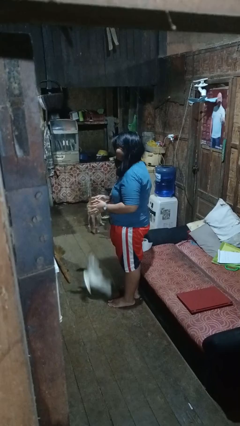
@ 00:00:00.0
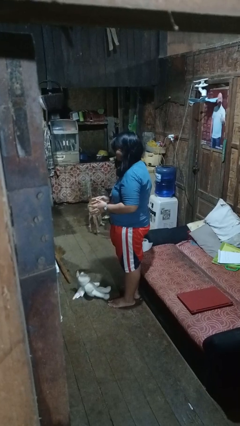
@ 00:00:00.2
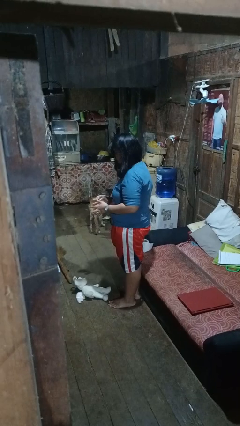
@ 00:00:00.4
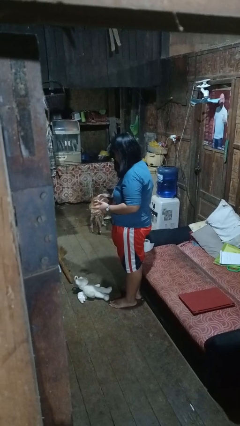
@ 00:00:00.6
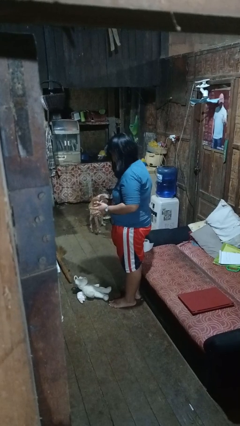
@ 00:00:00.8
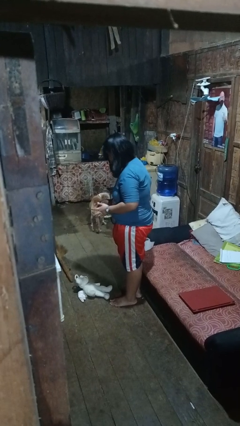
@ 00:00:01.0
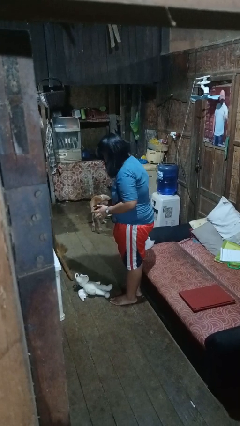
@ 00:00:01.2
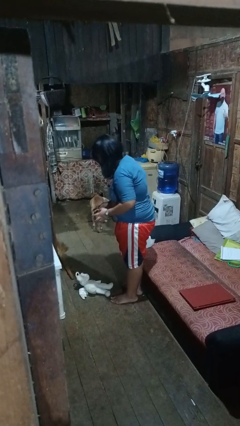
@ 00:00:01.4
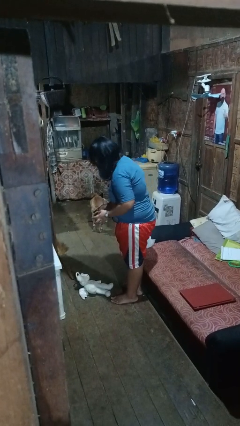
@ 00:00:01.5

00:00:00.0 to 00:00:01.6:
person drops object

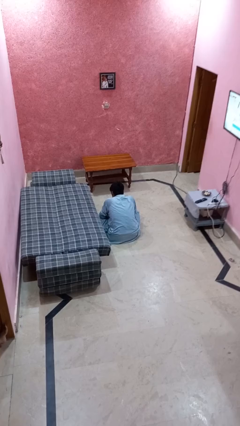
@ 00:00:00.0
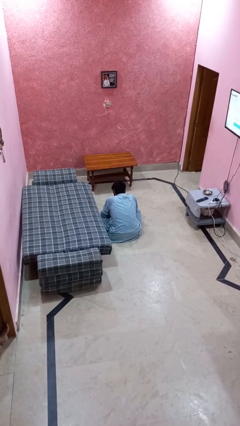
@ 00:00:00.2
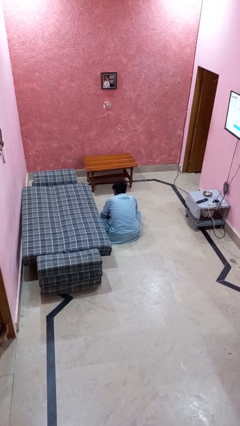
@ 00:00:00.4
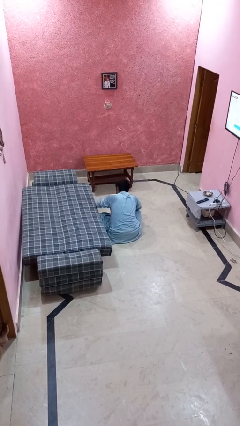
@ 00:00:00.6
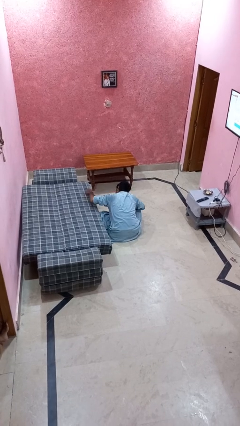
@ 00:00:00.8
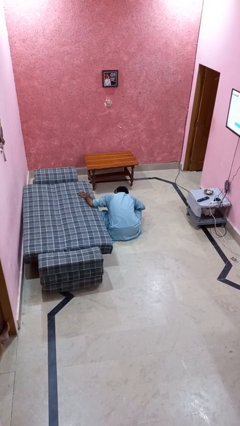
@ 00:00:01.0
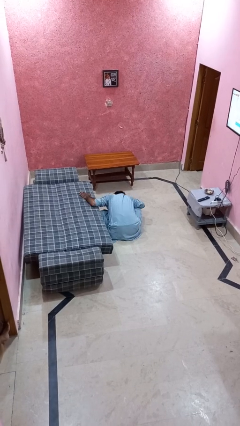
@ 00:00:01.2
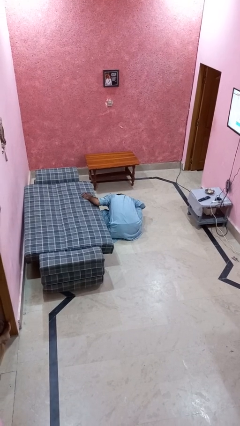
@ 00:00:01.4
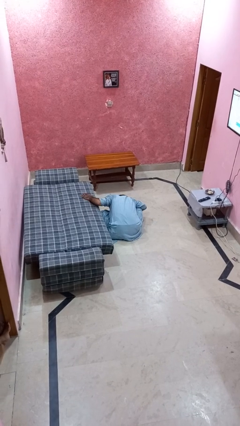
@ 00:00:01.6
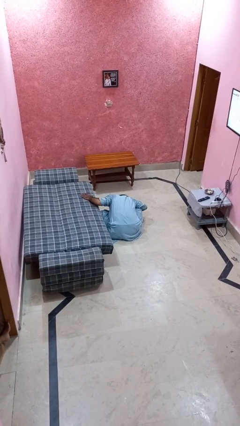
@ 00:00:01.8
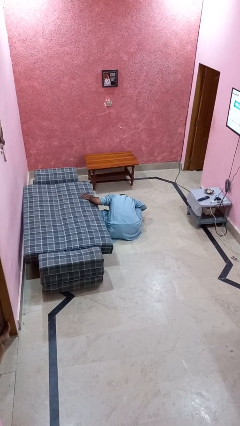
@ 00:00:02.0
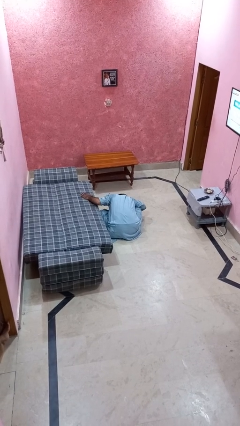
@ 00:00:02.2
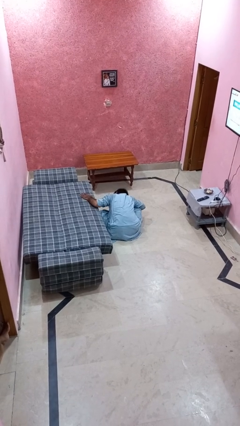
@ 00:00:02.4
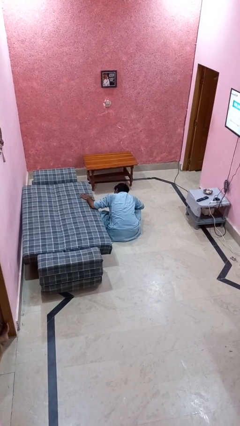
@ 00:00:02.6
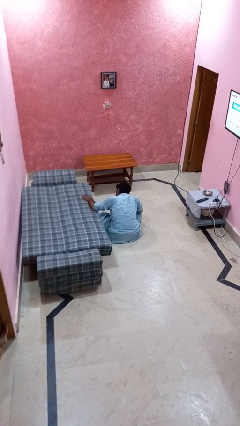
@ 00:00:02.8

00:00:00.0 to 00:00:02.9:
person searches under bed

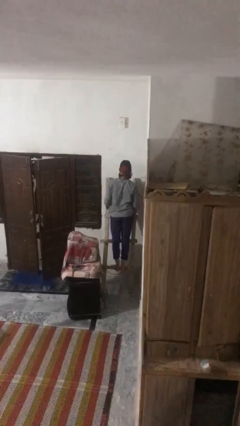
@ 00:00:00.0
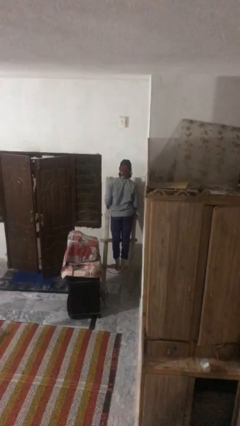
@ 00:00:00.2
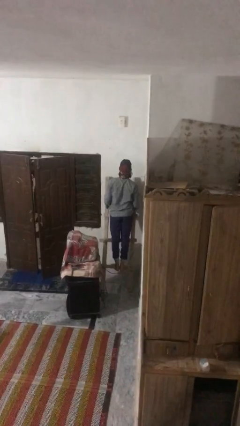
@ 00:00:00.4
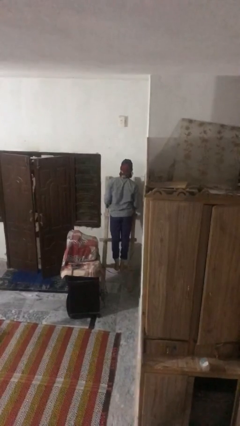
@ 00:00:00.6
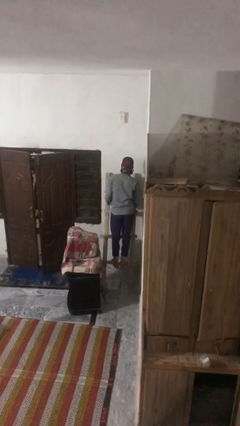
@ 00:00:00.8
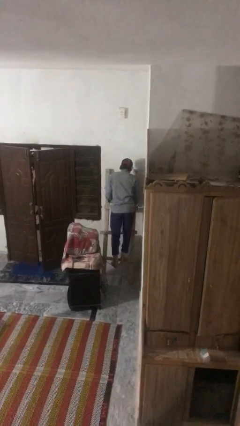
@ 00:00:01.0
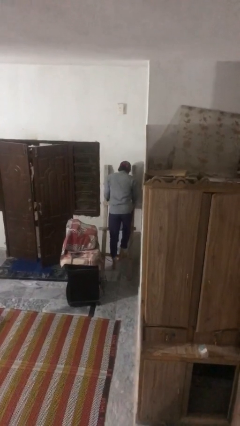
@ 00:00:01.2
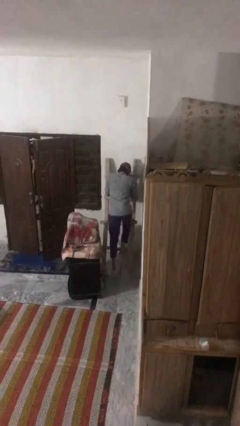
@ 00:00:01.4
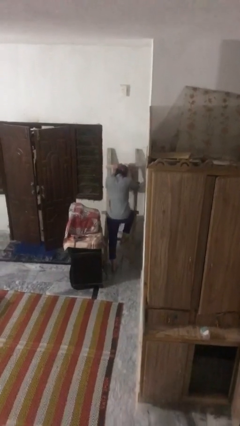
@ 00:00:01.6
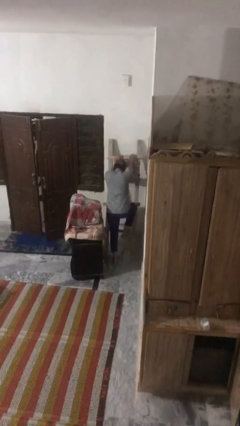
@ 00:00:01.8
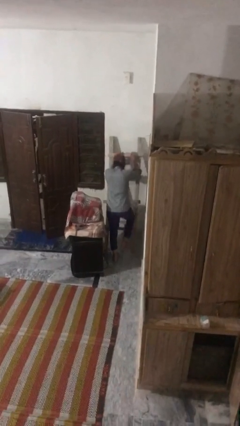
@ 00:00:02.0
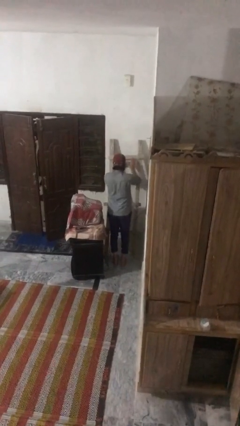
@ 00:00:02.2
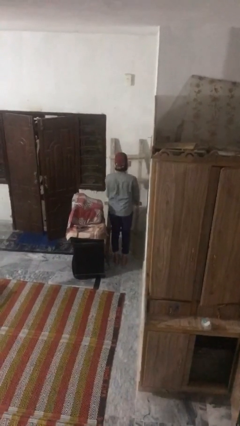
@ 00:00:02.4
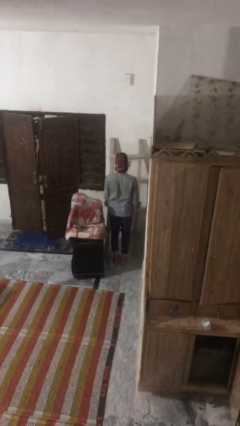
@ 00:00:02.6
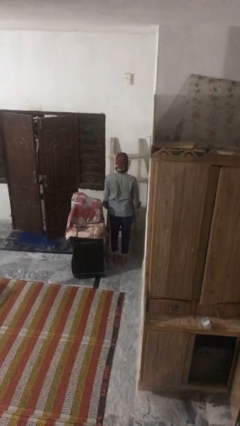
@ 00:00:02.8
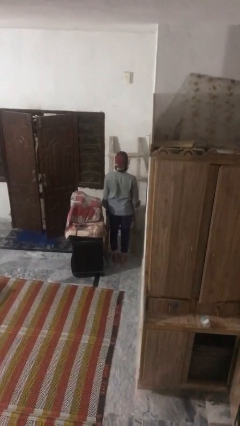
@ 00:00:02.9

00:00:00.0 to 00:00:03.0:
person climbs down ladder

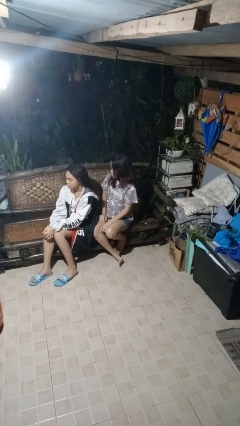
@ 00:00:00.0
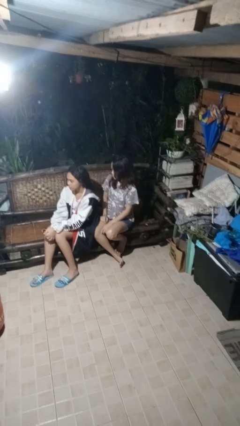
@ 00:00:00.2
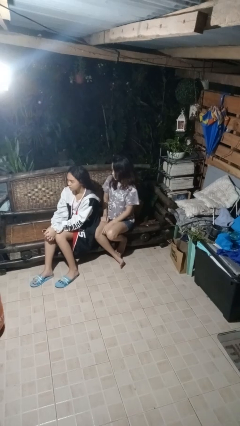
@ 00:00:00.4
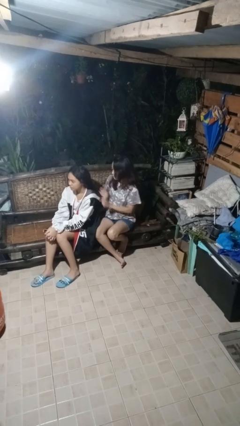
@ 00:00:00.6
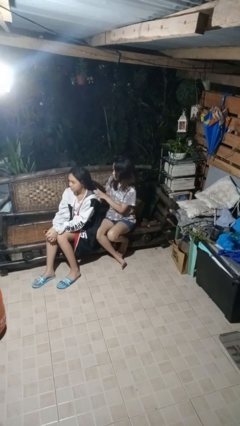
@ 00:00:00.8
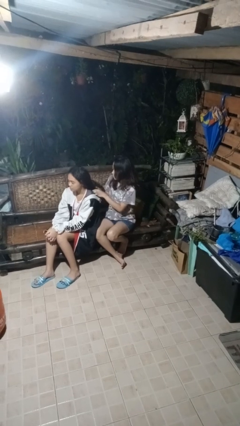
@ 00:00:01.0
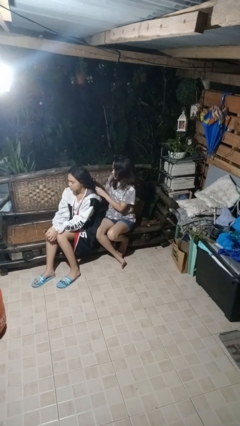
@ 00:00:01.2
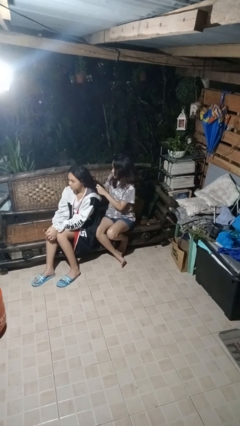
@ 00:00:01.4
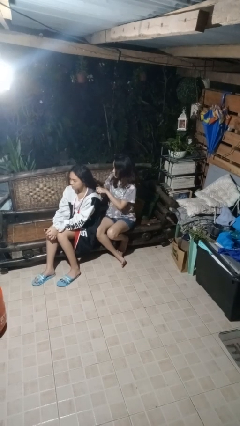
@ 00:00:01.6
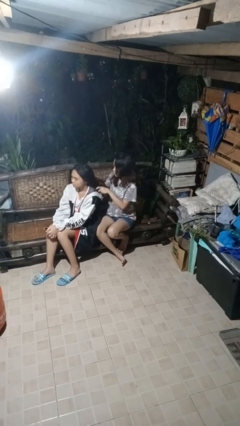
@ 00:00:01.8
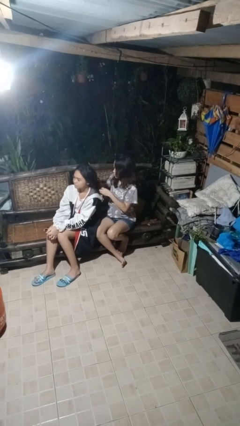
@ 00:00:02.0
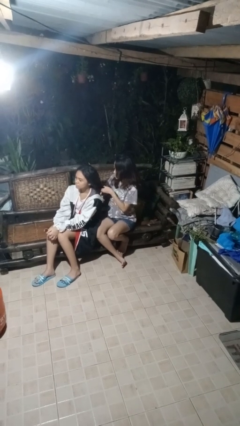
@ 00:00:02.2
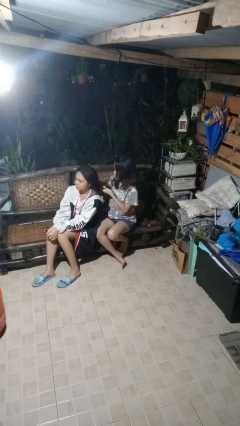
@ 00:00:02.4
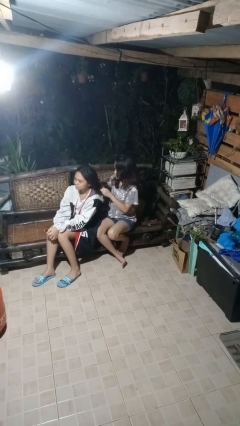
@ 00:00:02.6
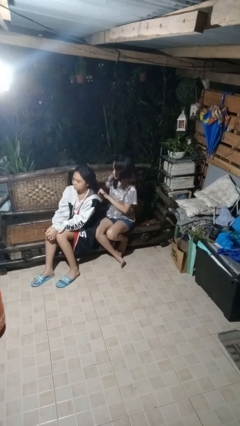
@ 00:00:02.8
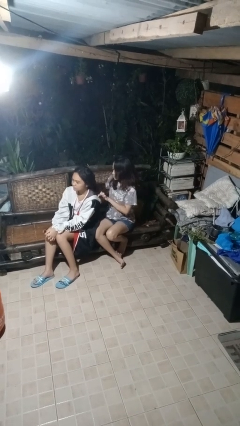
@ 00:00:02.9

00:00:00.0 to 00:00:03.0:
person braids hair of person

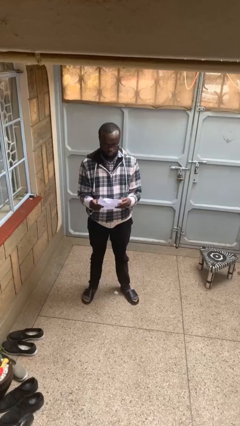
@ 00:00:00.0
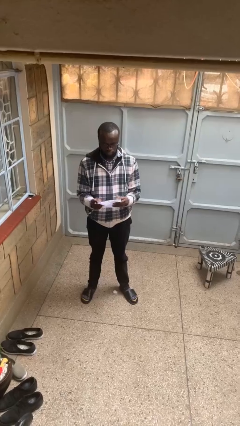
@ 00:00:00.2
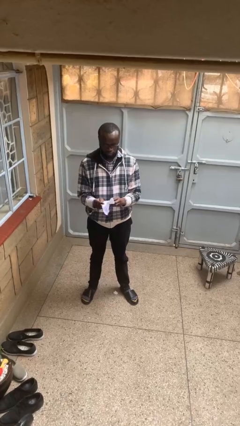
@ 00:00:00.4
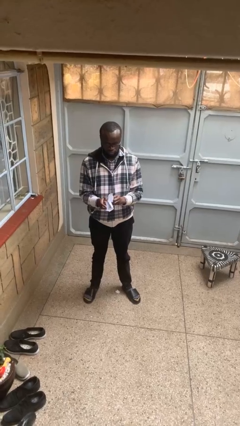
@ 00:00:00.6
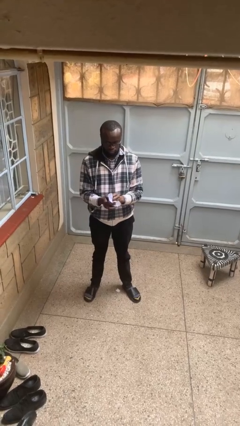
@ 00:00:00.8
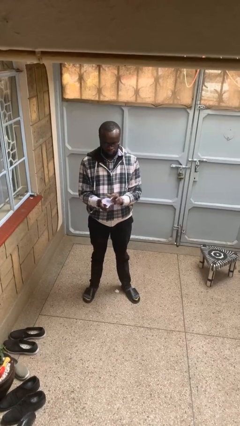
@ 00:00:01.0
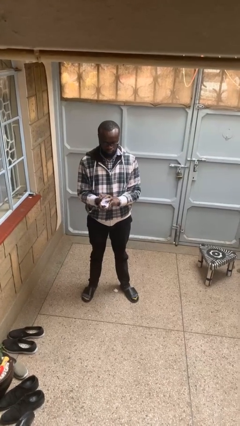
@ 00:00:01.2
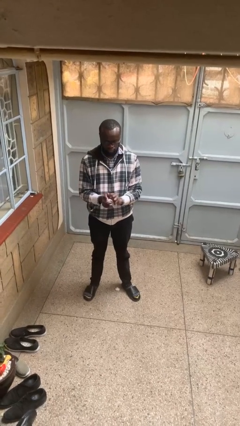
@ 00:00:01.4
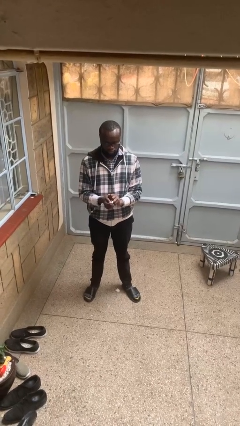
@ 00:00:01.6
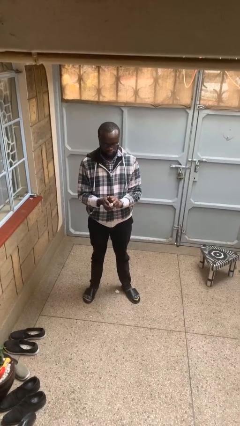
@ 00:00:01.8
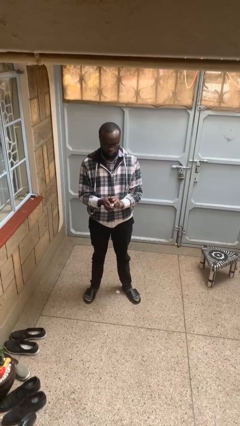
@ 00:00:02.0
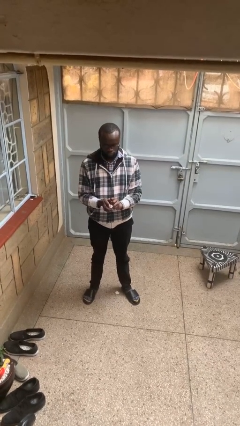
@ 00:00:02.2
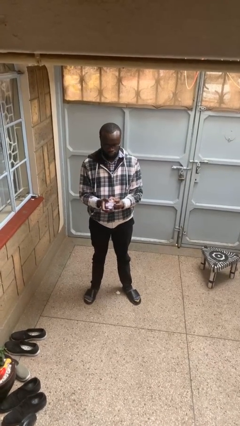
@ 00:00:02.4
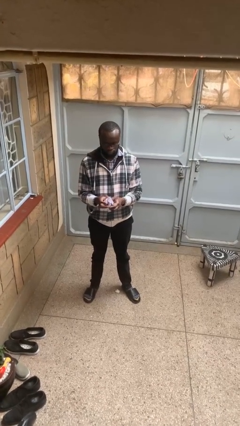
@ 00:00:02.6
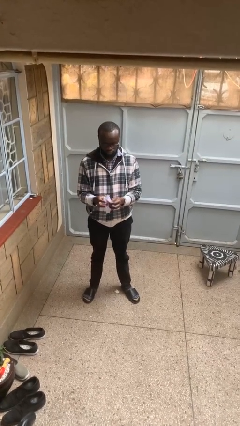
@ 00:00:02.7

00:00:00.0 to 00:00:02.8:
person crumples paper

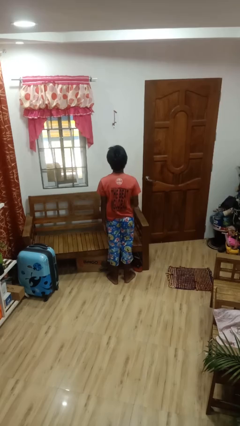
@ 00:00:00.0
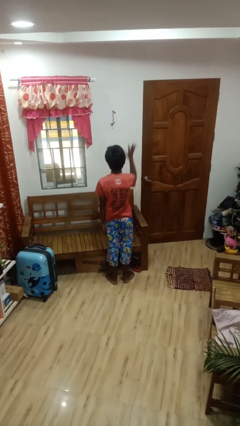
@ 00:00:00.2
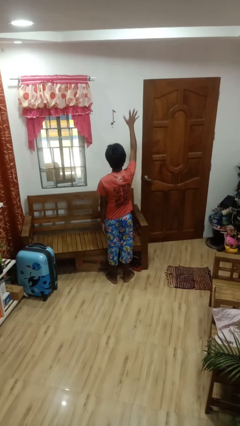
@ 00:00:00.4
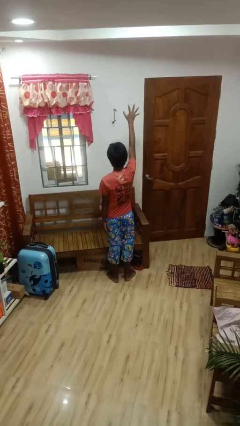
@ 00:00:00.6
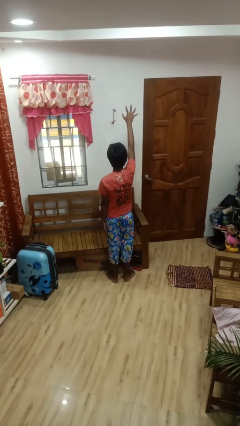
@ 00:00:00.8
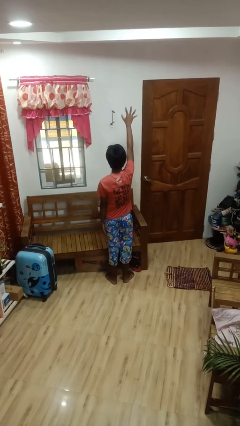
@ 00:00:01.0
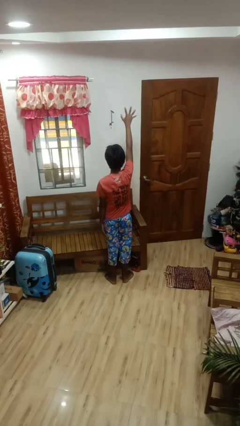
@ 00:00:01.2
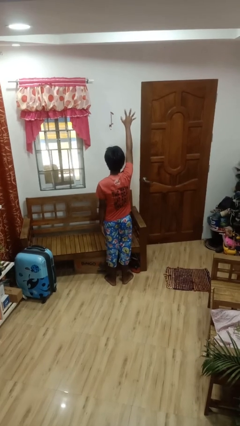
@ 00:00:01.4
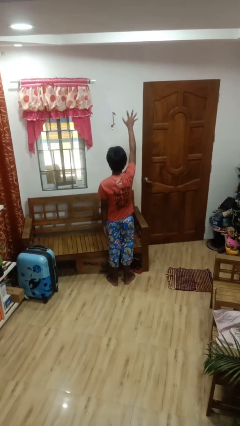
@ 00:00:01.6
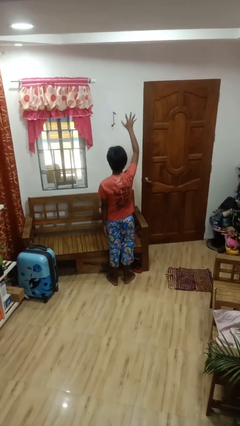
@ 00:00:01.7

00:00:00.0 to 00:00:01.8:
person gestures number five

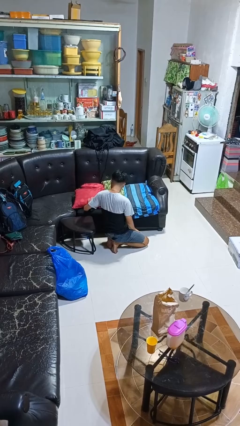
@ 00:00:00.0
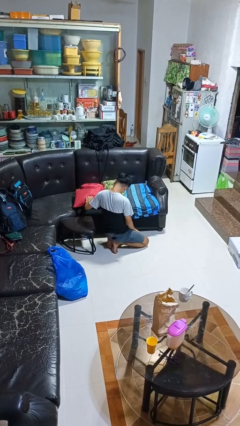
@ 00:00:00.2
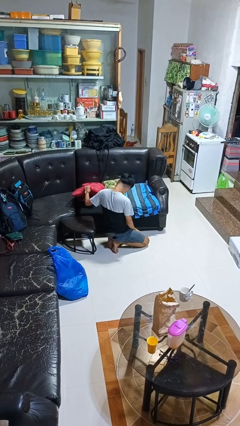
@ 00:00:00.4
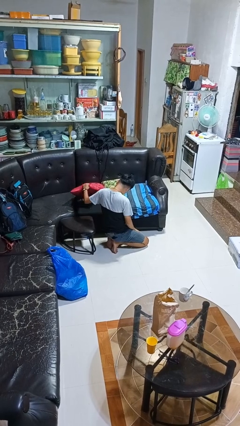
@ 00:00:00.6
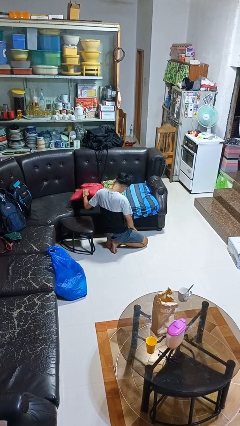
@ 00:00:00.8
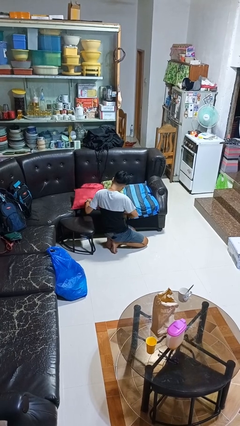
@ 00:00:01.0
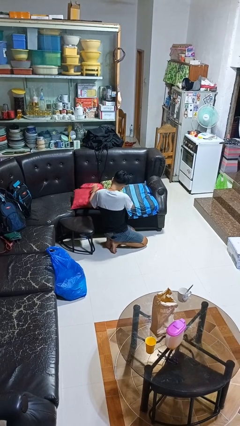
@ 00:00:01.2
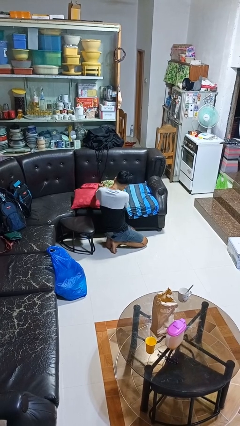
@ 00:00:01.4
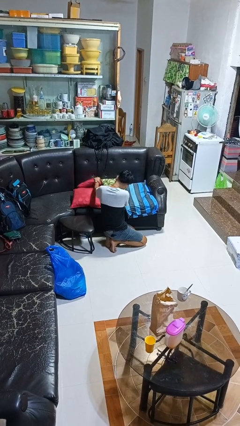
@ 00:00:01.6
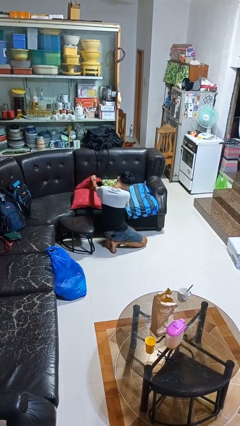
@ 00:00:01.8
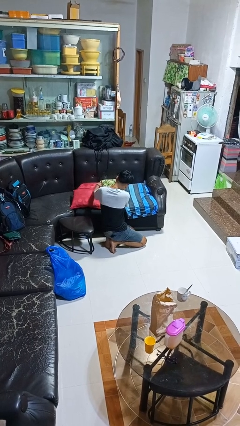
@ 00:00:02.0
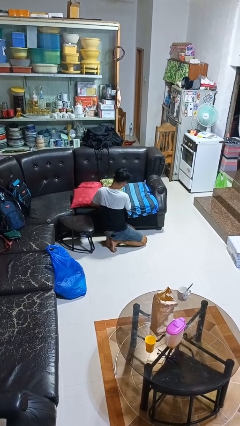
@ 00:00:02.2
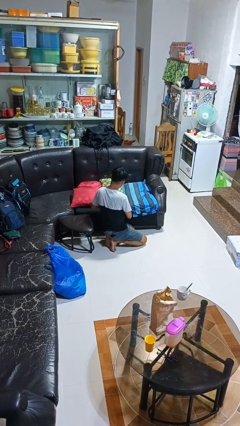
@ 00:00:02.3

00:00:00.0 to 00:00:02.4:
person searches in couch
